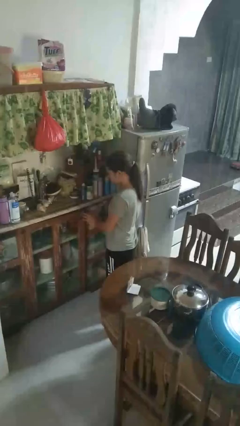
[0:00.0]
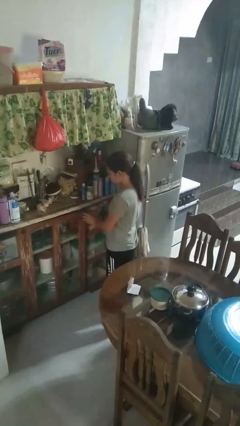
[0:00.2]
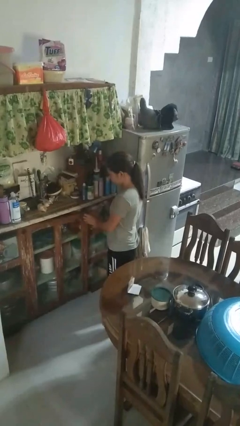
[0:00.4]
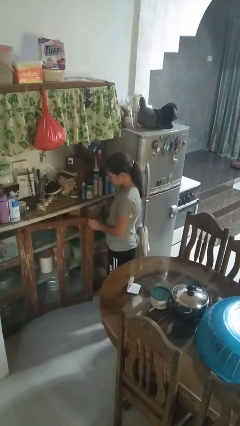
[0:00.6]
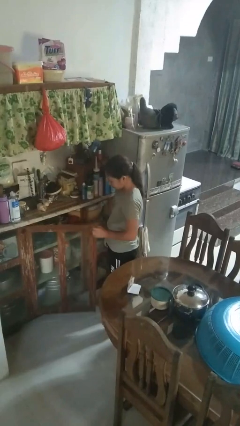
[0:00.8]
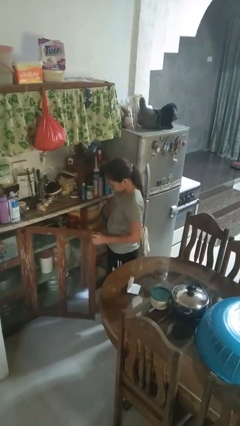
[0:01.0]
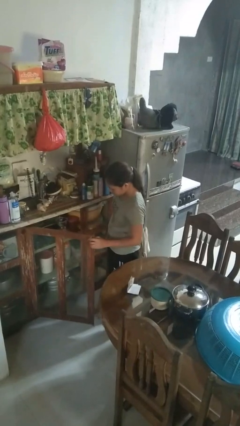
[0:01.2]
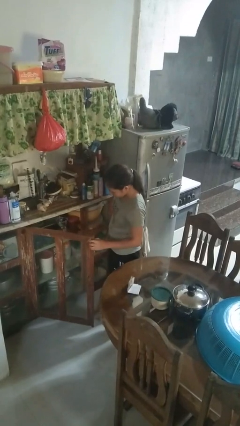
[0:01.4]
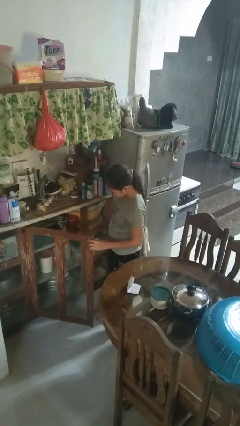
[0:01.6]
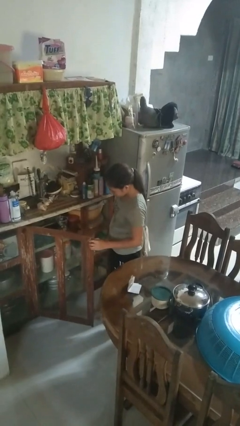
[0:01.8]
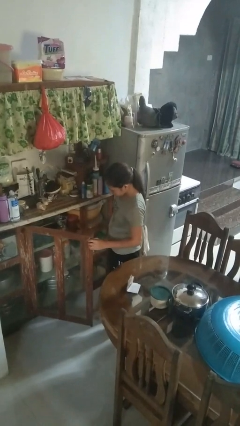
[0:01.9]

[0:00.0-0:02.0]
person opens cabinet

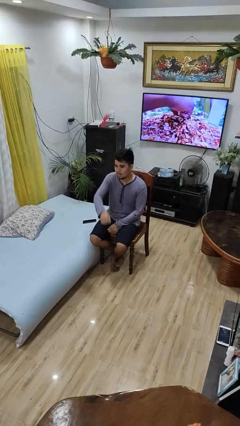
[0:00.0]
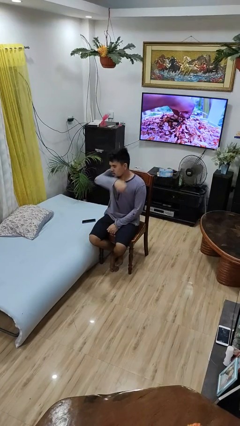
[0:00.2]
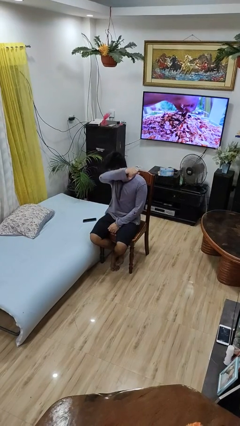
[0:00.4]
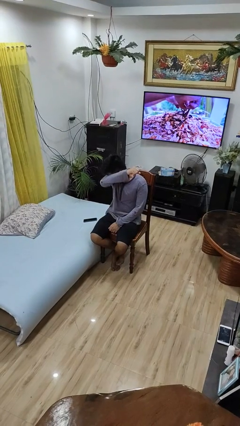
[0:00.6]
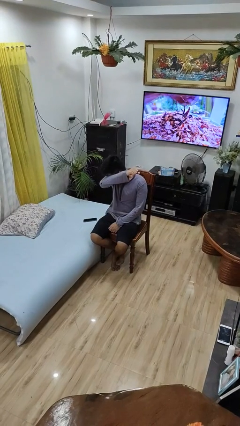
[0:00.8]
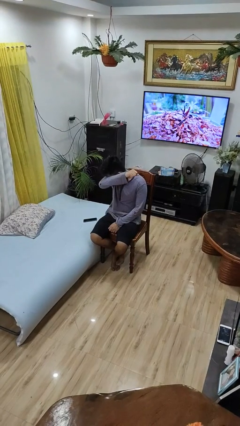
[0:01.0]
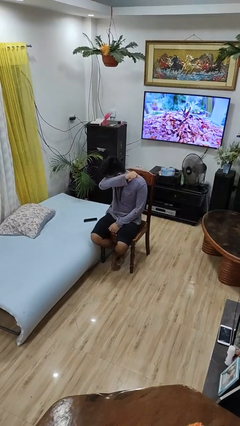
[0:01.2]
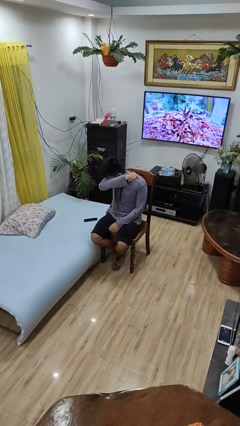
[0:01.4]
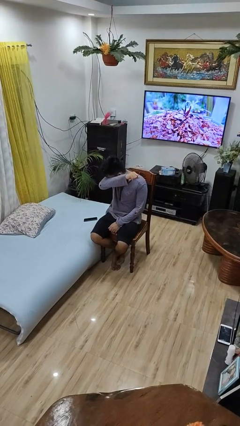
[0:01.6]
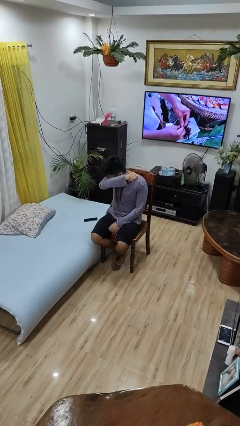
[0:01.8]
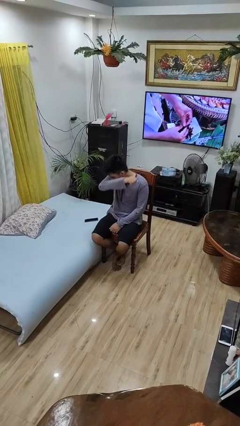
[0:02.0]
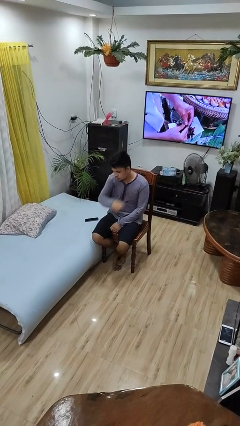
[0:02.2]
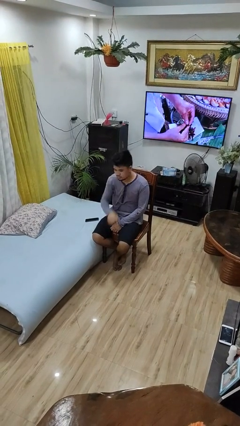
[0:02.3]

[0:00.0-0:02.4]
person sneezes into arm

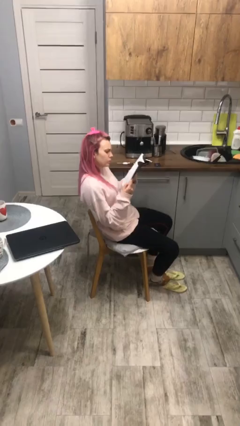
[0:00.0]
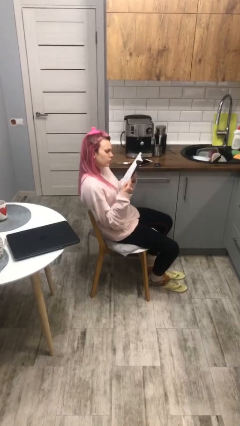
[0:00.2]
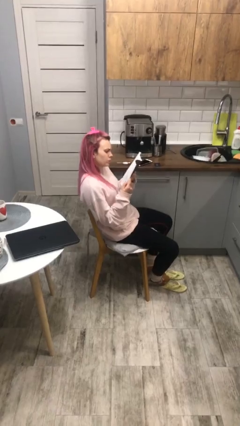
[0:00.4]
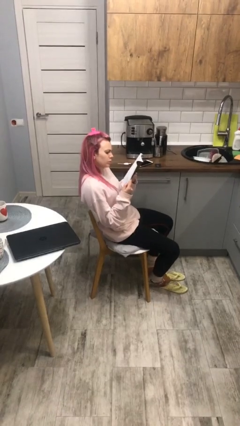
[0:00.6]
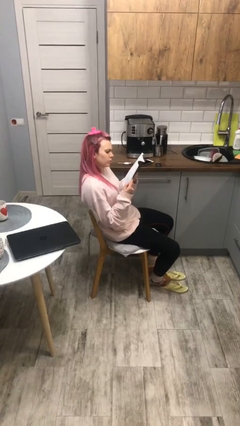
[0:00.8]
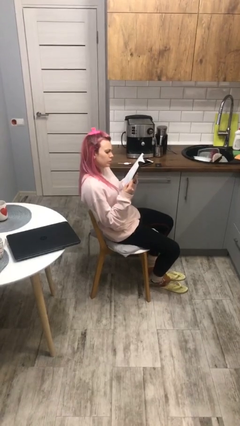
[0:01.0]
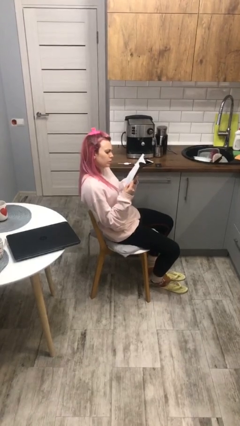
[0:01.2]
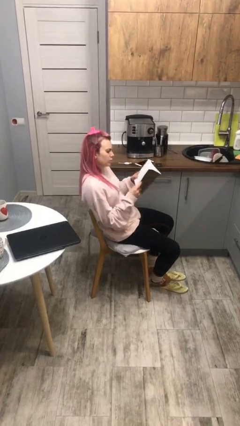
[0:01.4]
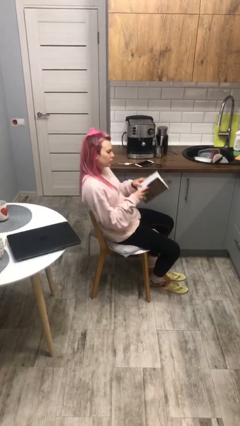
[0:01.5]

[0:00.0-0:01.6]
person reads document

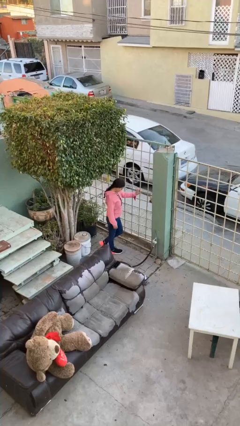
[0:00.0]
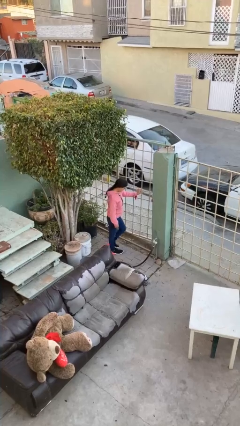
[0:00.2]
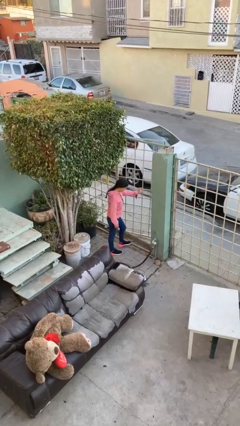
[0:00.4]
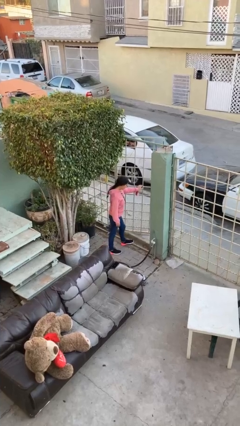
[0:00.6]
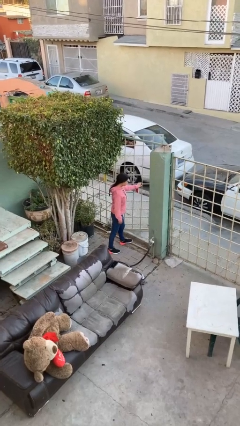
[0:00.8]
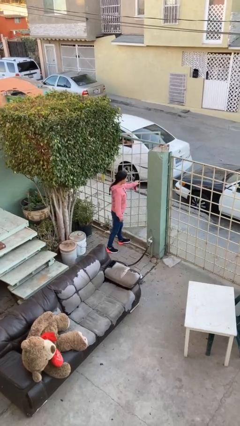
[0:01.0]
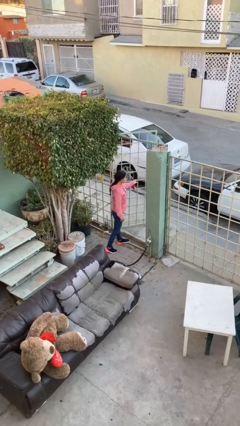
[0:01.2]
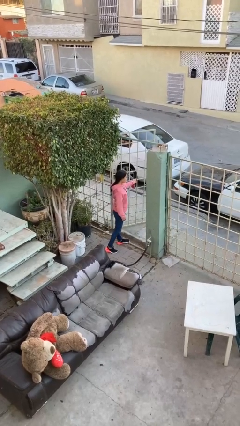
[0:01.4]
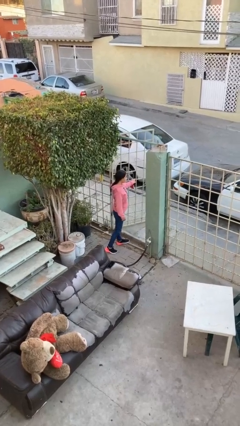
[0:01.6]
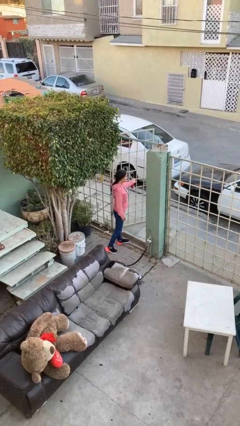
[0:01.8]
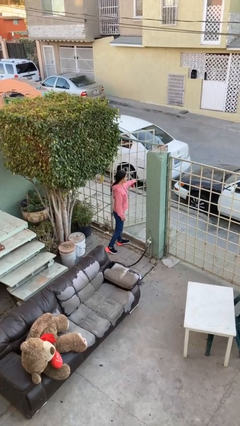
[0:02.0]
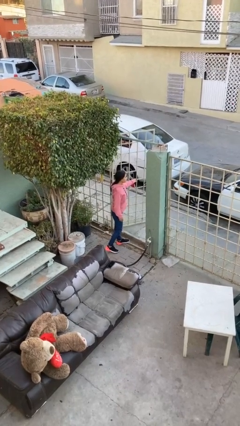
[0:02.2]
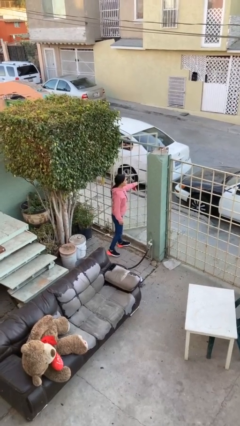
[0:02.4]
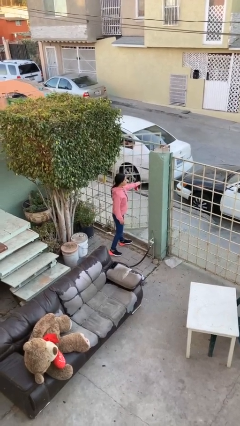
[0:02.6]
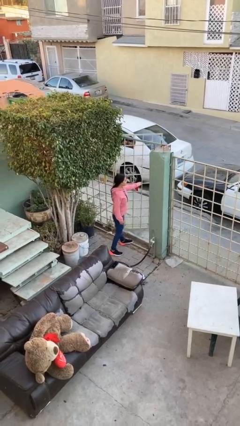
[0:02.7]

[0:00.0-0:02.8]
person opens facility door

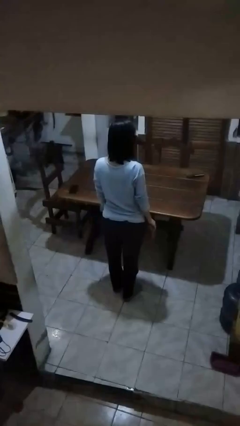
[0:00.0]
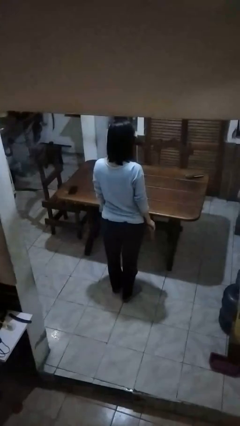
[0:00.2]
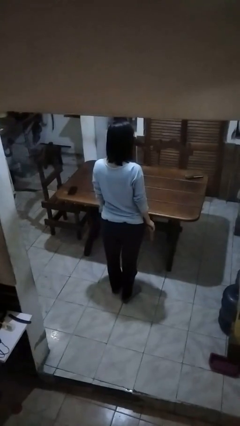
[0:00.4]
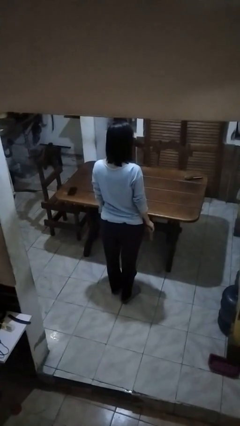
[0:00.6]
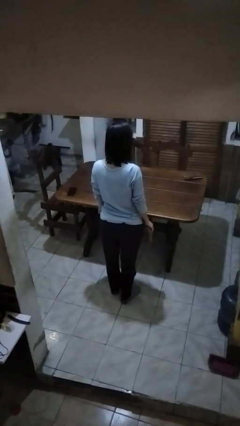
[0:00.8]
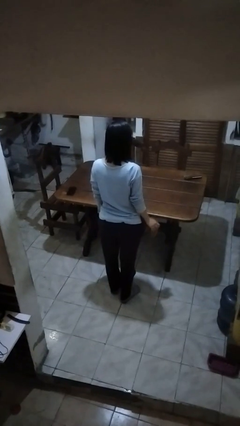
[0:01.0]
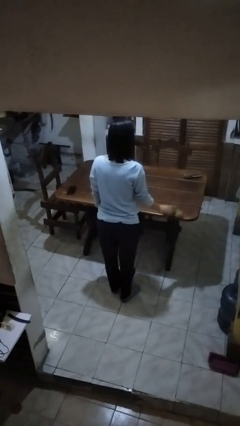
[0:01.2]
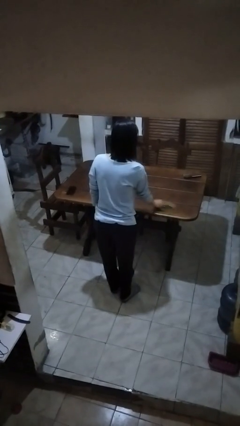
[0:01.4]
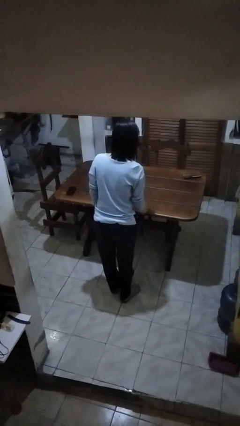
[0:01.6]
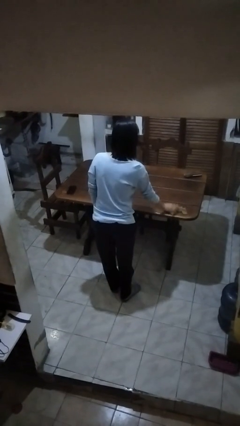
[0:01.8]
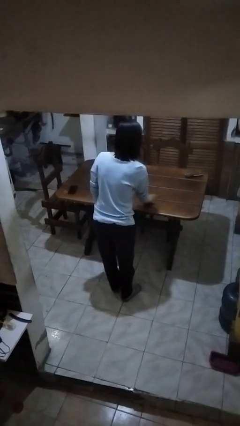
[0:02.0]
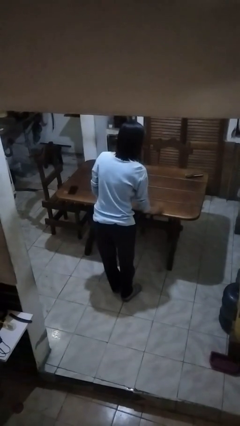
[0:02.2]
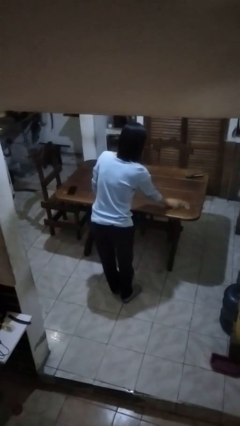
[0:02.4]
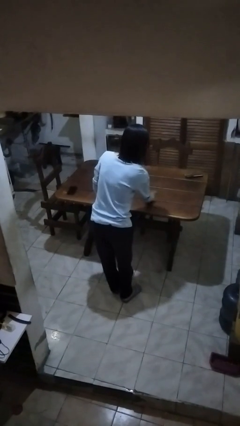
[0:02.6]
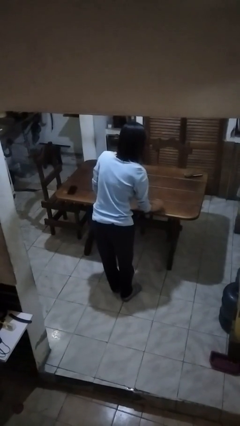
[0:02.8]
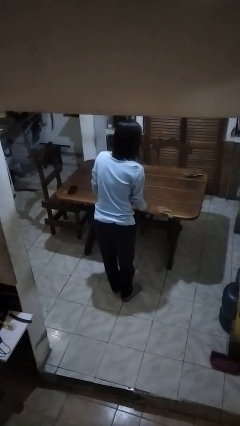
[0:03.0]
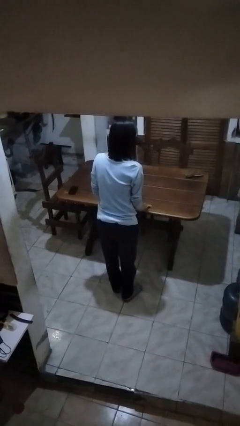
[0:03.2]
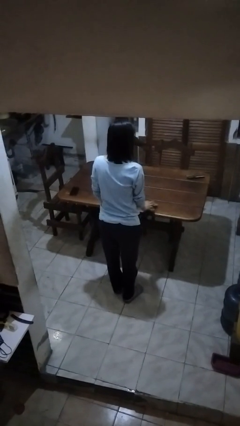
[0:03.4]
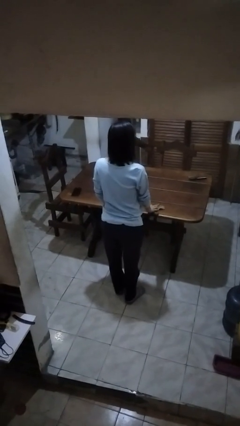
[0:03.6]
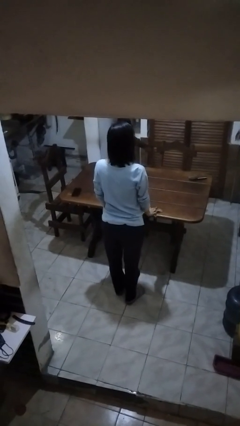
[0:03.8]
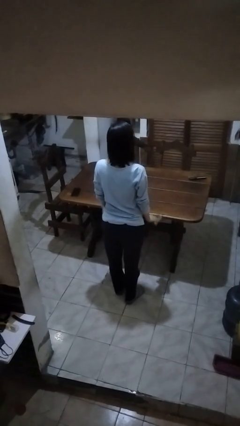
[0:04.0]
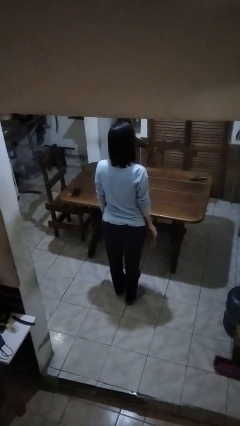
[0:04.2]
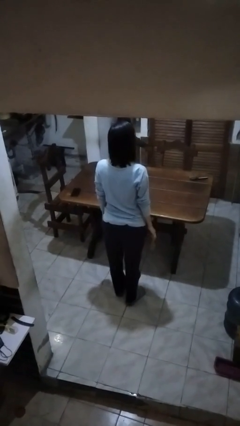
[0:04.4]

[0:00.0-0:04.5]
person cleans table with rag

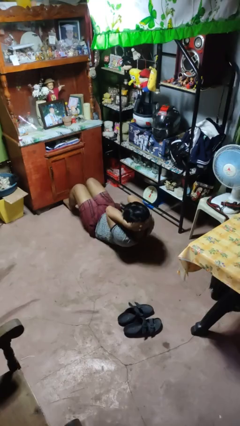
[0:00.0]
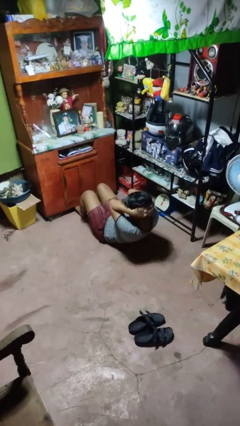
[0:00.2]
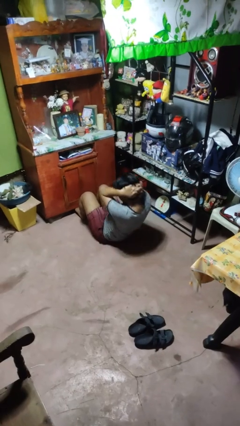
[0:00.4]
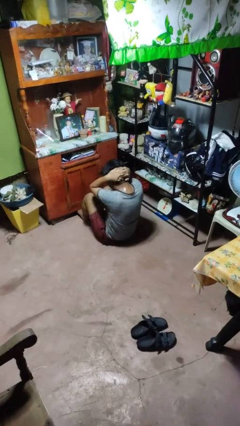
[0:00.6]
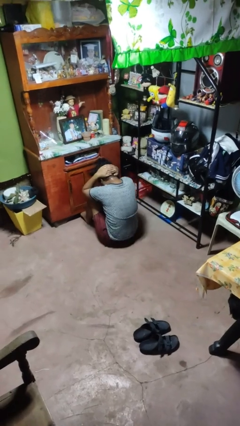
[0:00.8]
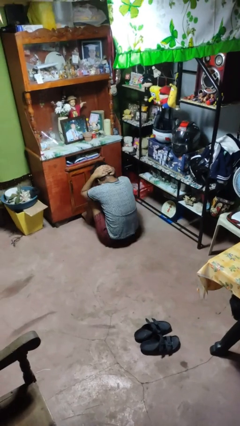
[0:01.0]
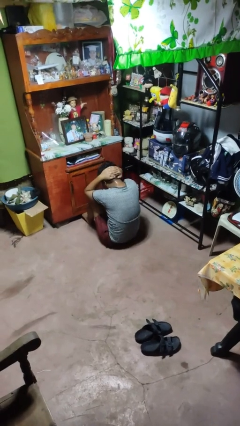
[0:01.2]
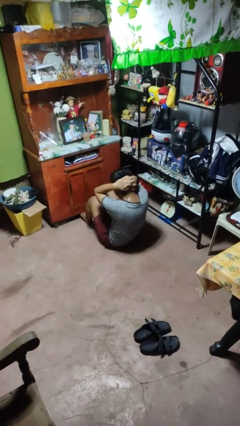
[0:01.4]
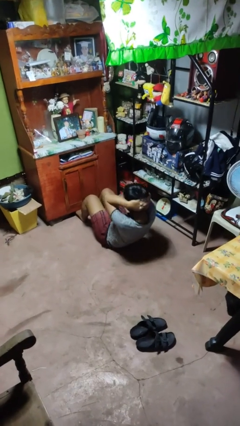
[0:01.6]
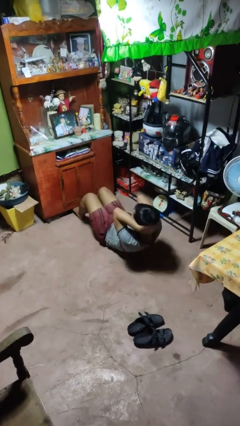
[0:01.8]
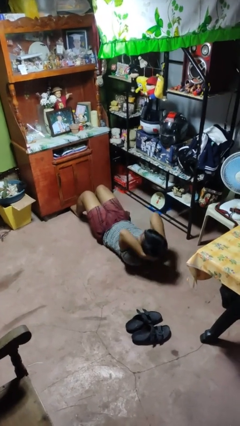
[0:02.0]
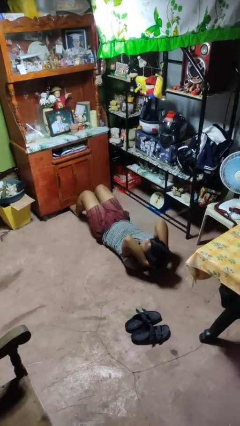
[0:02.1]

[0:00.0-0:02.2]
person exercises with situp

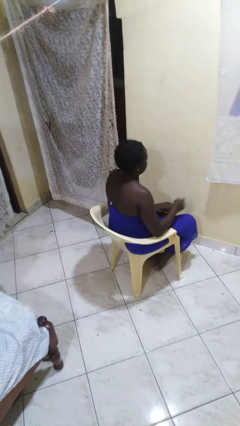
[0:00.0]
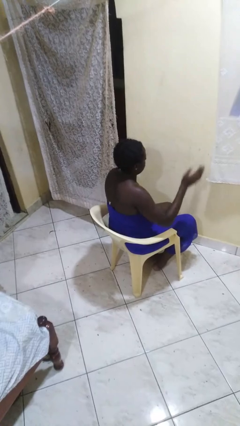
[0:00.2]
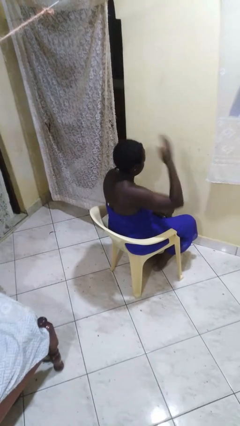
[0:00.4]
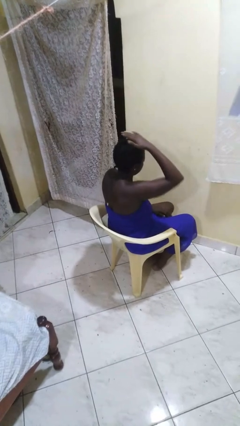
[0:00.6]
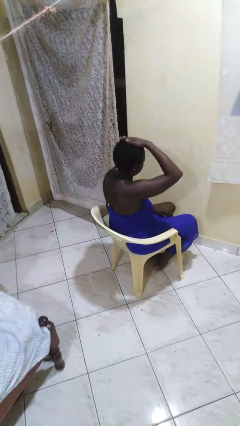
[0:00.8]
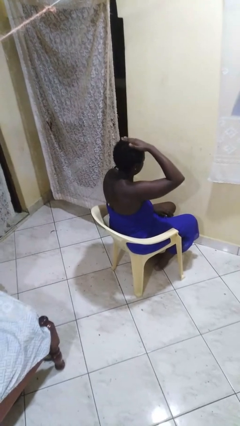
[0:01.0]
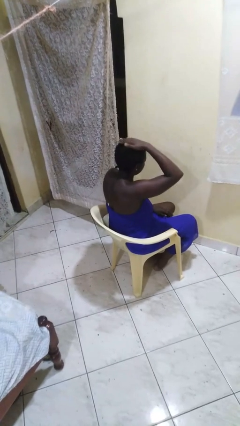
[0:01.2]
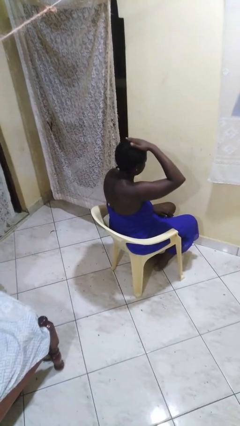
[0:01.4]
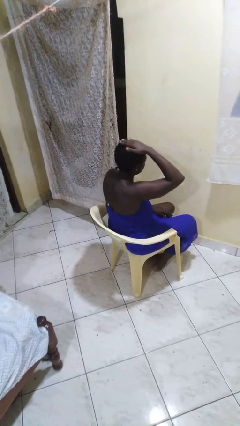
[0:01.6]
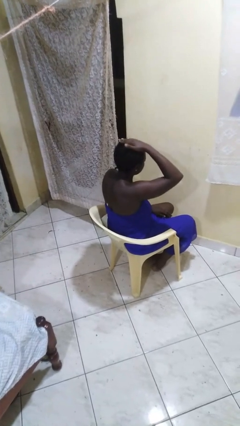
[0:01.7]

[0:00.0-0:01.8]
person pats head
